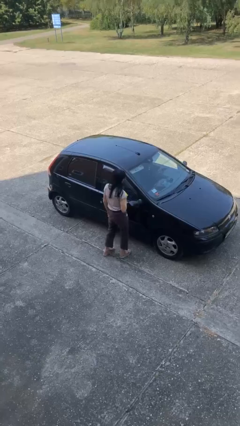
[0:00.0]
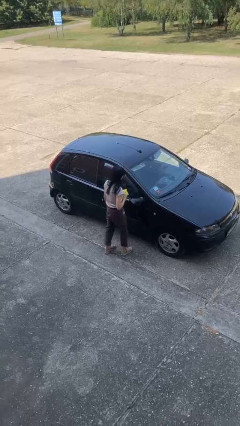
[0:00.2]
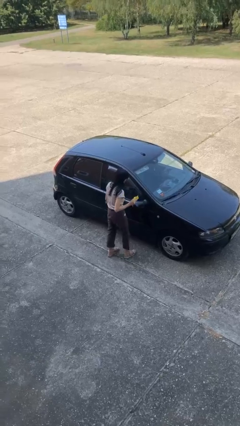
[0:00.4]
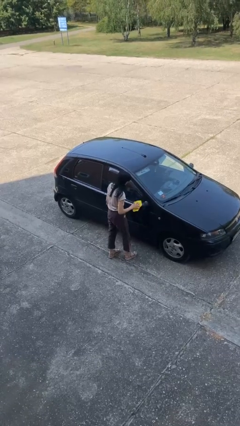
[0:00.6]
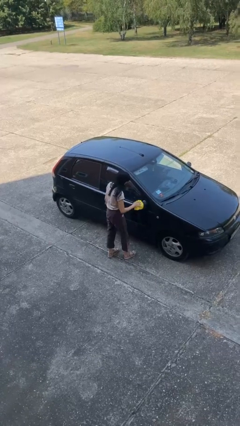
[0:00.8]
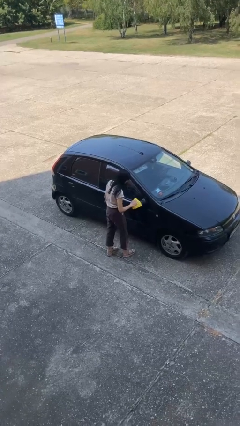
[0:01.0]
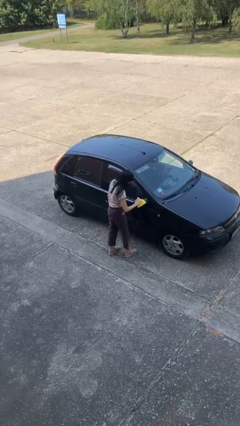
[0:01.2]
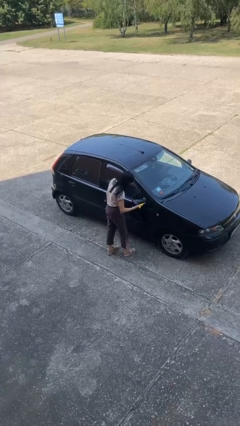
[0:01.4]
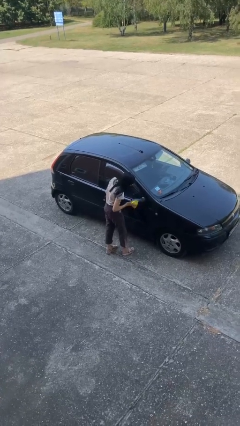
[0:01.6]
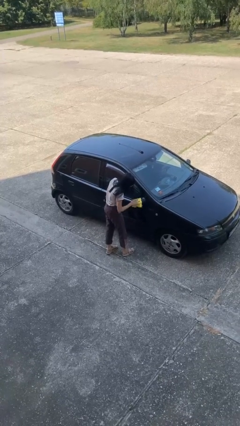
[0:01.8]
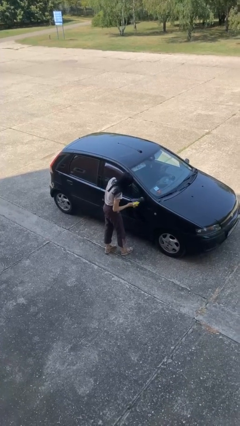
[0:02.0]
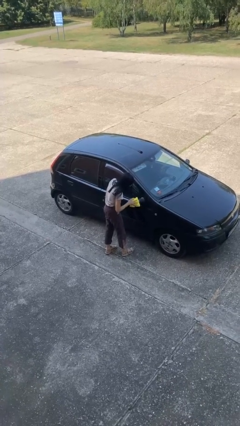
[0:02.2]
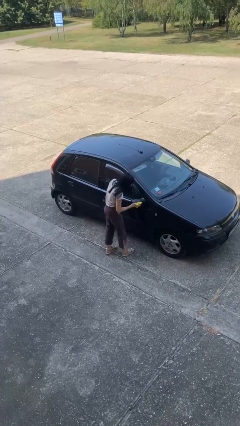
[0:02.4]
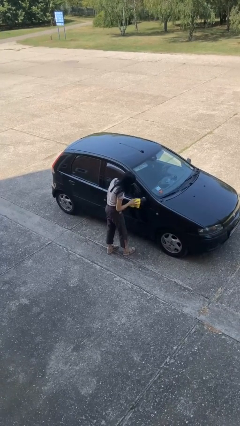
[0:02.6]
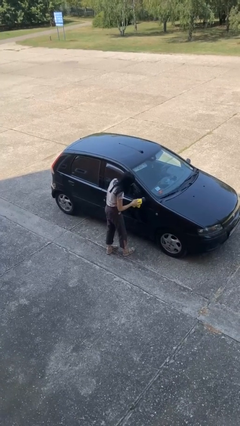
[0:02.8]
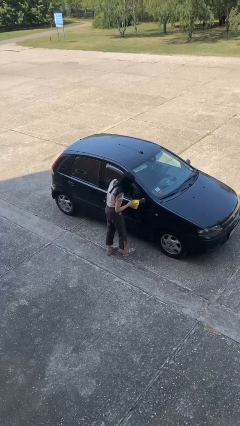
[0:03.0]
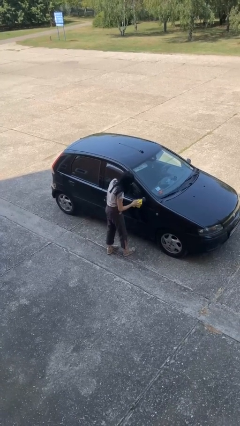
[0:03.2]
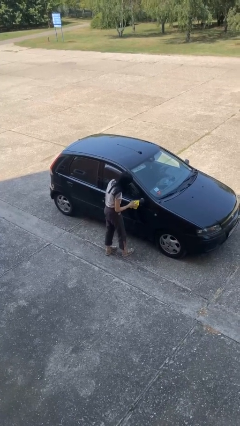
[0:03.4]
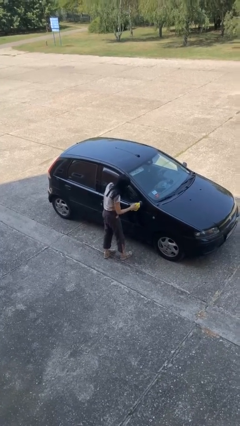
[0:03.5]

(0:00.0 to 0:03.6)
person polishes car with rag

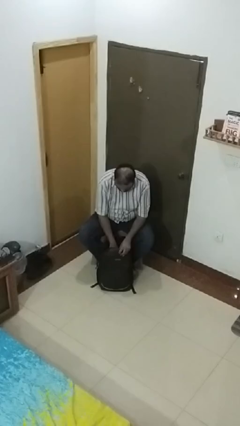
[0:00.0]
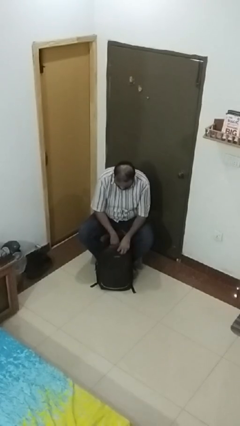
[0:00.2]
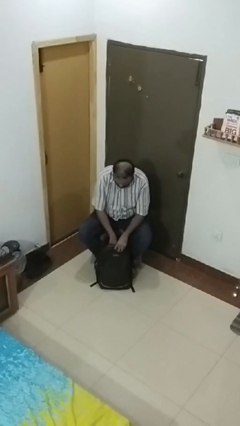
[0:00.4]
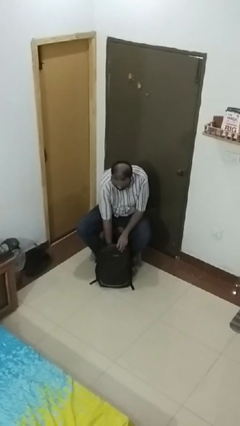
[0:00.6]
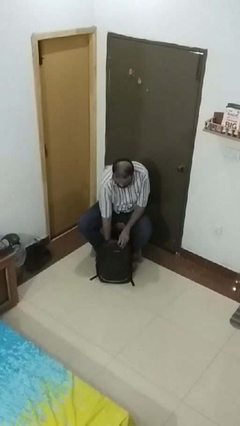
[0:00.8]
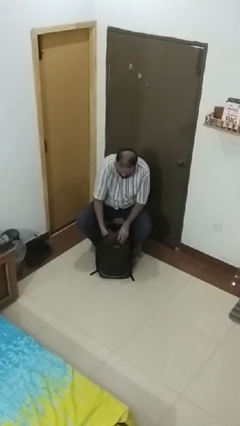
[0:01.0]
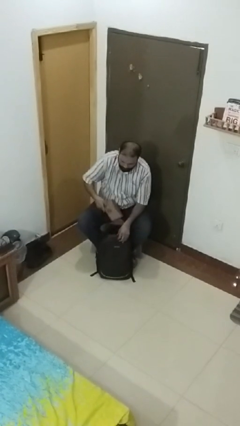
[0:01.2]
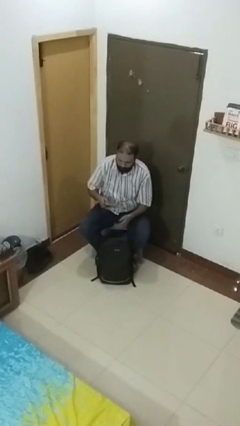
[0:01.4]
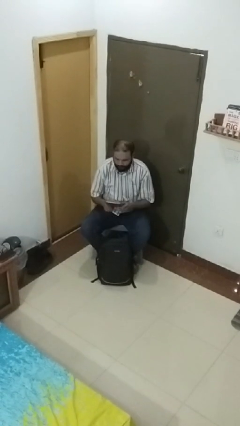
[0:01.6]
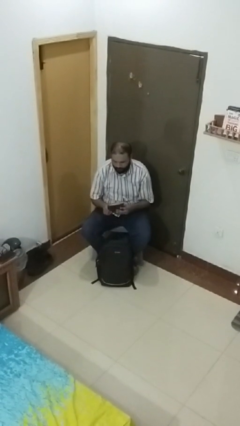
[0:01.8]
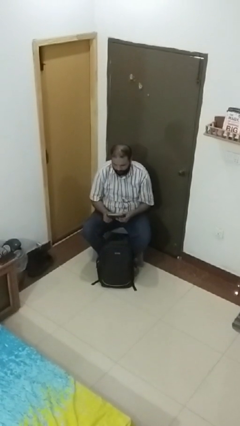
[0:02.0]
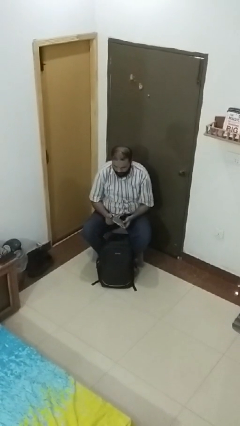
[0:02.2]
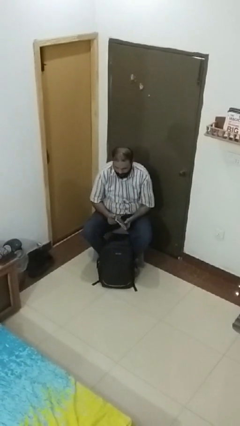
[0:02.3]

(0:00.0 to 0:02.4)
person takes object from backpack

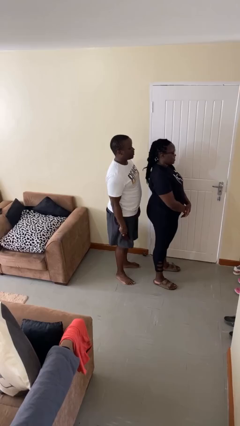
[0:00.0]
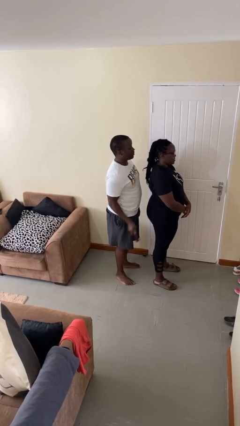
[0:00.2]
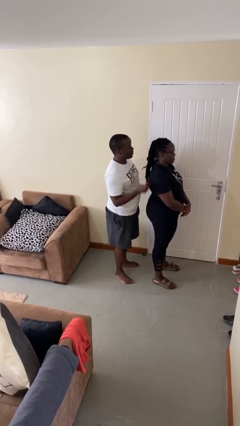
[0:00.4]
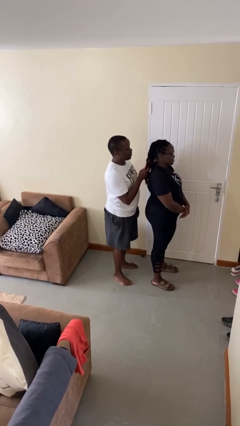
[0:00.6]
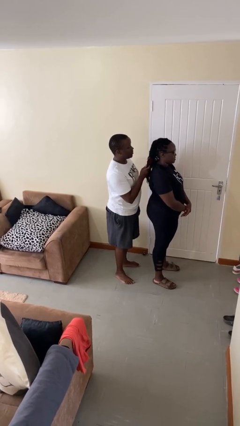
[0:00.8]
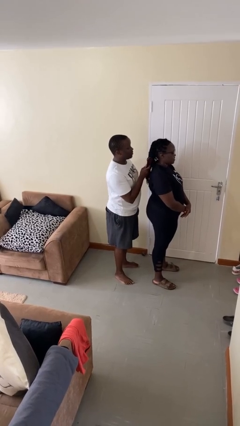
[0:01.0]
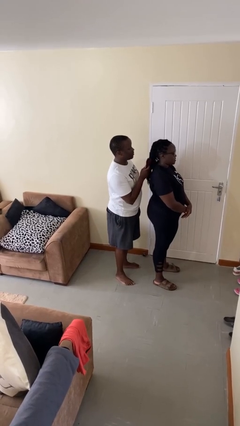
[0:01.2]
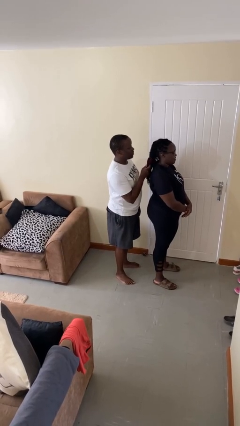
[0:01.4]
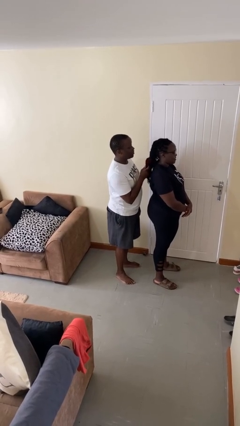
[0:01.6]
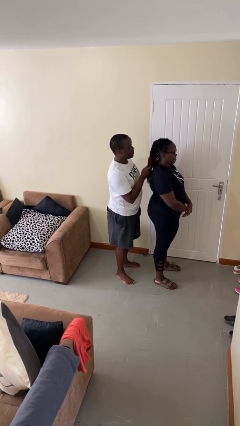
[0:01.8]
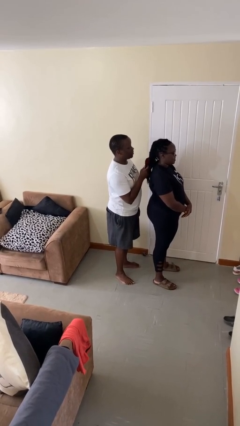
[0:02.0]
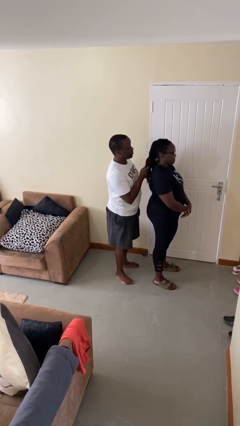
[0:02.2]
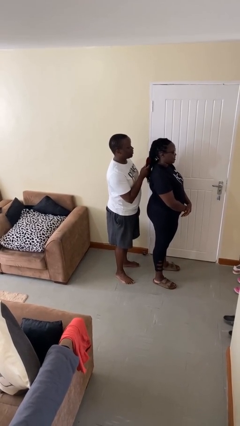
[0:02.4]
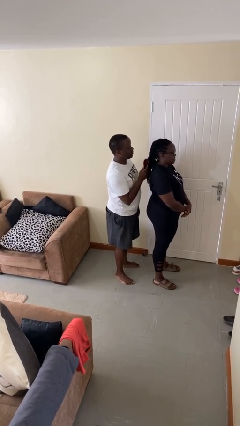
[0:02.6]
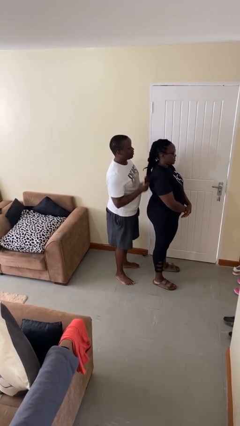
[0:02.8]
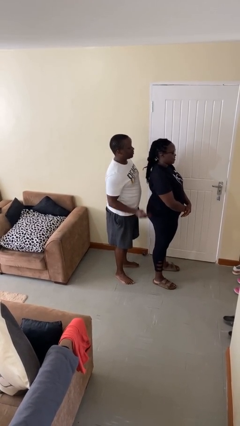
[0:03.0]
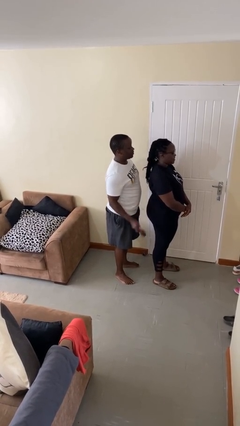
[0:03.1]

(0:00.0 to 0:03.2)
person brushes hair of person

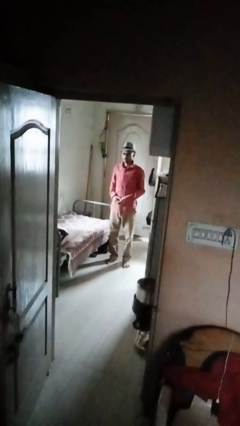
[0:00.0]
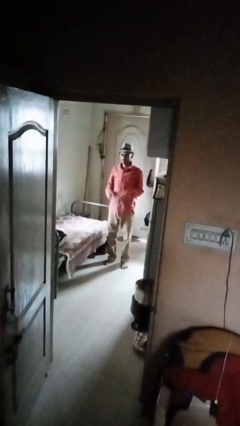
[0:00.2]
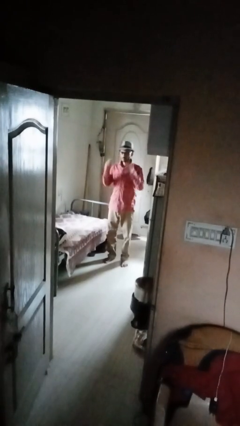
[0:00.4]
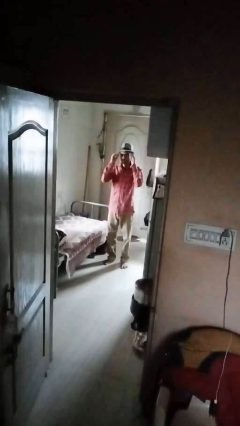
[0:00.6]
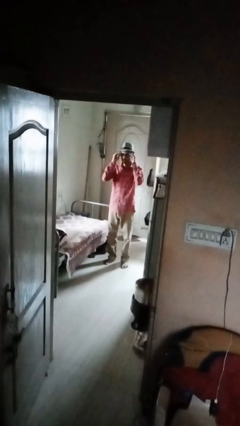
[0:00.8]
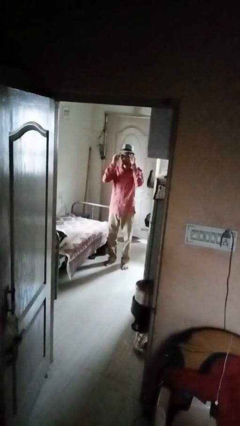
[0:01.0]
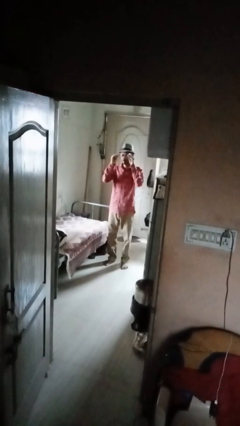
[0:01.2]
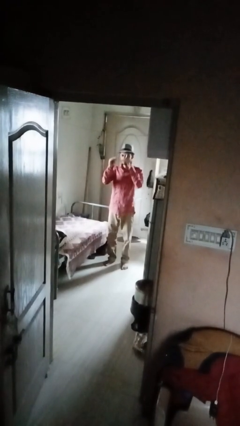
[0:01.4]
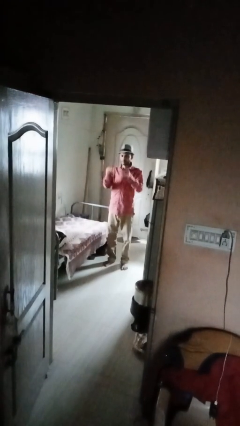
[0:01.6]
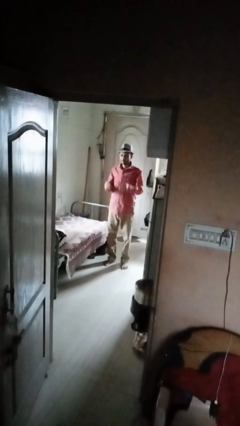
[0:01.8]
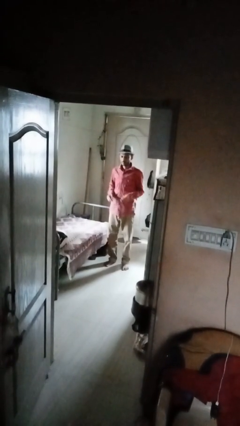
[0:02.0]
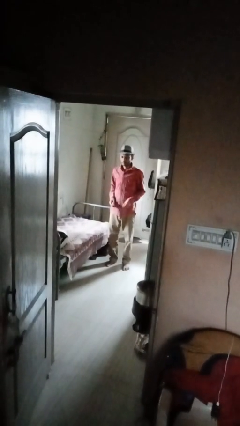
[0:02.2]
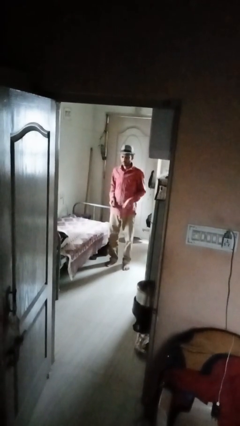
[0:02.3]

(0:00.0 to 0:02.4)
person takes off glasses

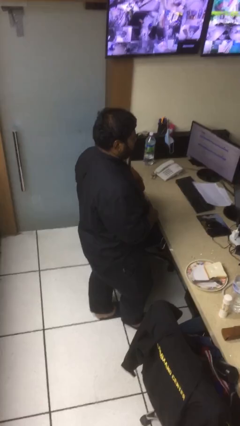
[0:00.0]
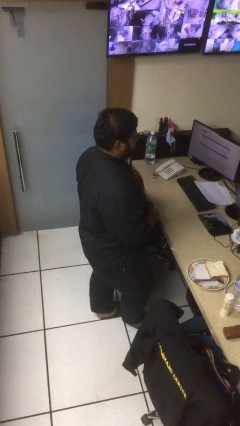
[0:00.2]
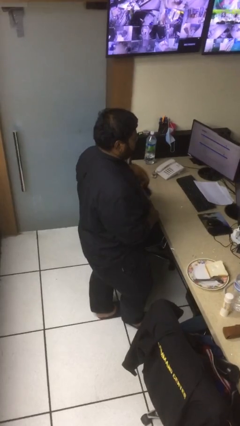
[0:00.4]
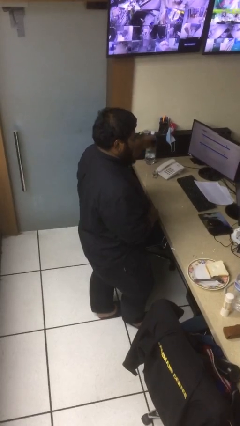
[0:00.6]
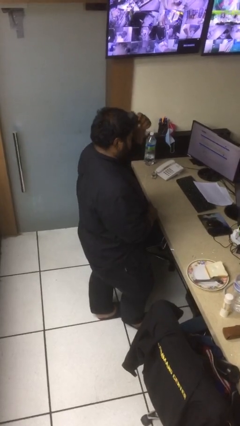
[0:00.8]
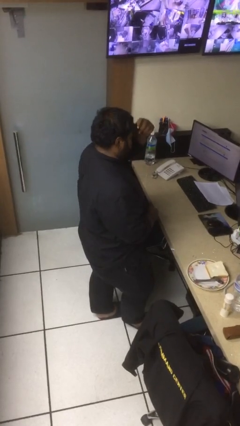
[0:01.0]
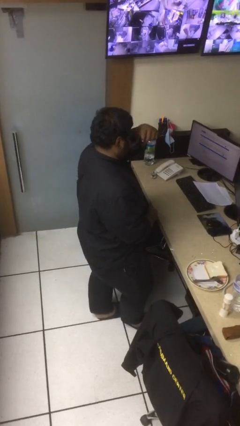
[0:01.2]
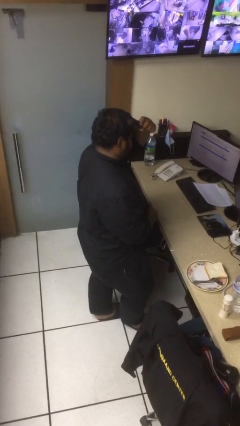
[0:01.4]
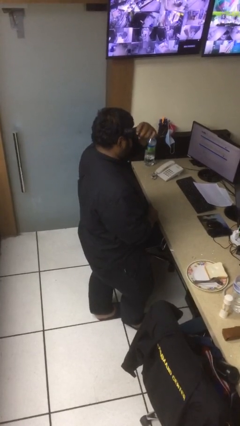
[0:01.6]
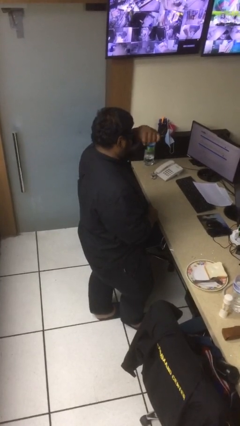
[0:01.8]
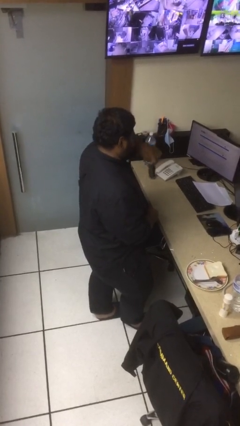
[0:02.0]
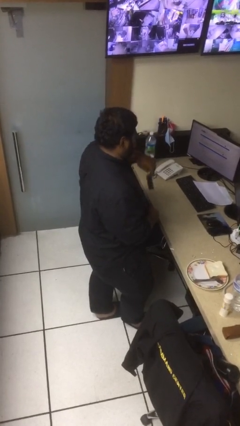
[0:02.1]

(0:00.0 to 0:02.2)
person brushes hair

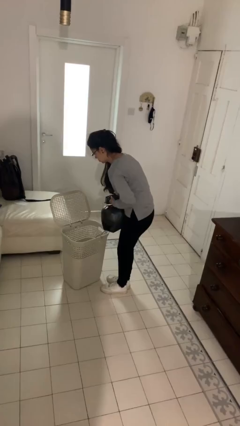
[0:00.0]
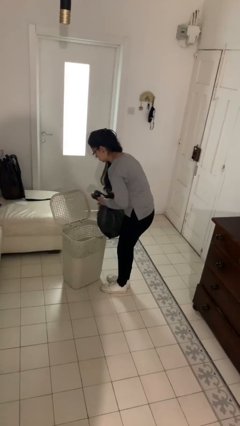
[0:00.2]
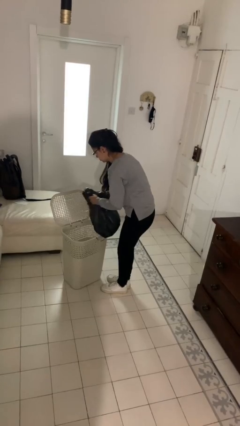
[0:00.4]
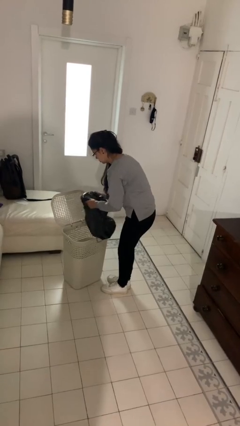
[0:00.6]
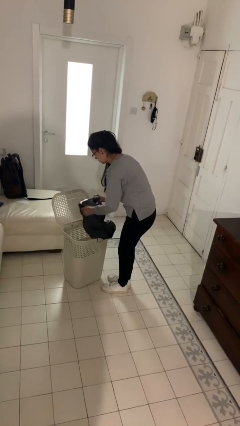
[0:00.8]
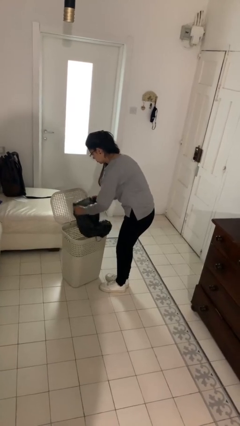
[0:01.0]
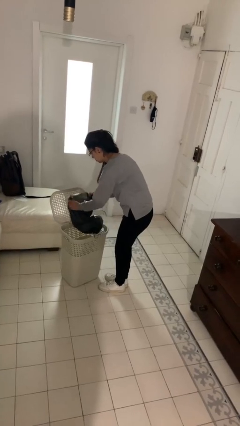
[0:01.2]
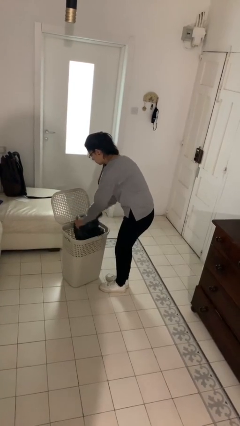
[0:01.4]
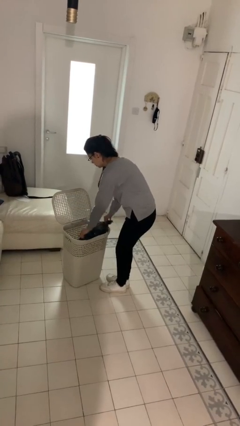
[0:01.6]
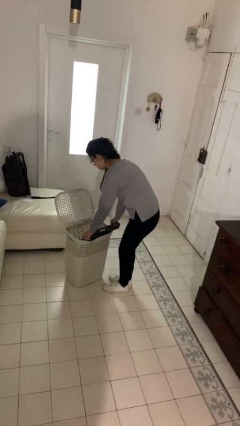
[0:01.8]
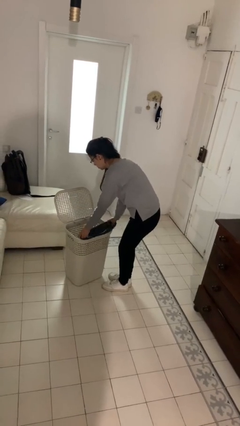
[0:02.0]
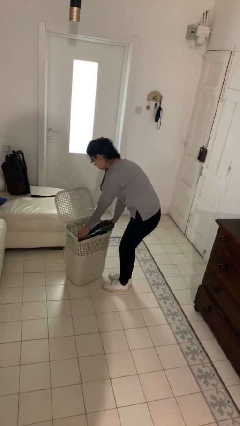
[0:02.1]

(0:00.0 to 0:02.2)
person inserts trashbag into trashcan

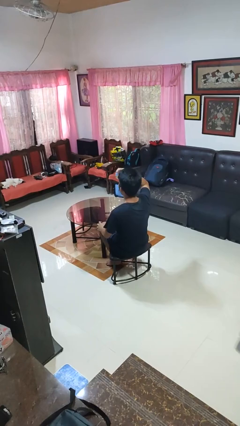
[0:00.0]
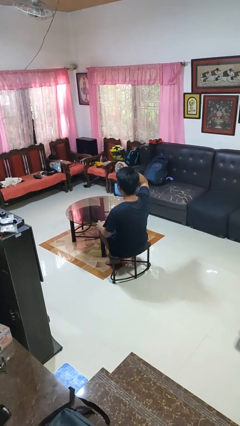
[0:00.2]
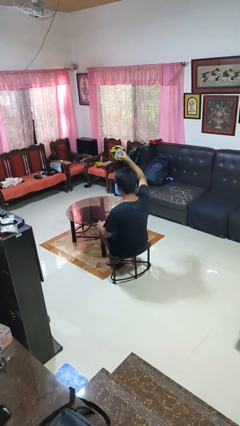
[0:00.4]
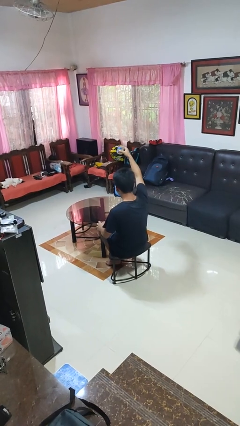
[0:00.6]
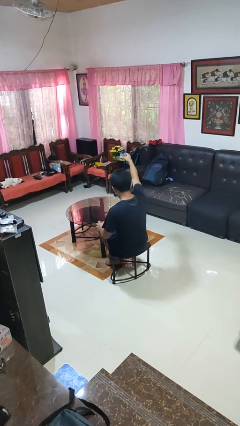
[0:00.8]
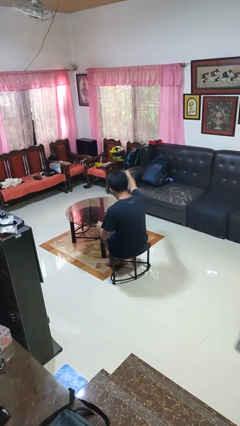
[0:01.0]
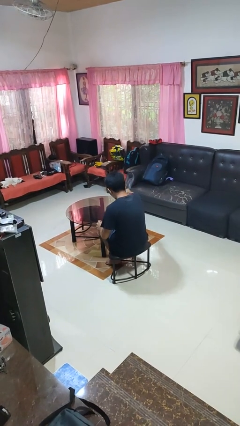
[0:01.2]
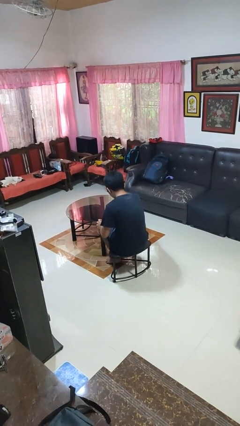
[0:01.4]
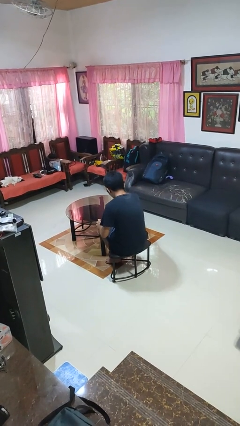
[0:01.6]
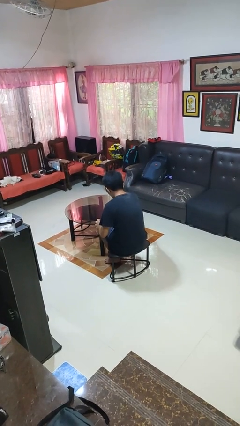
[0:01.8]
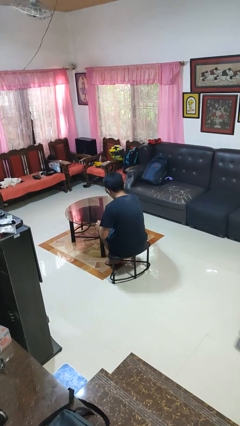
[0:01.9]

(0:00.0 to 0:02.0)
person puts down object on table
